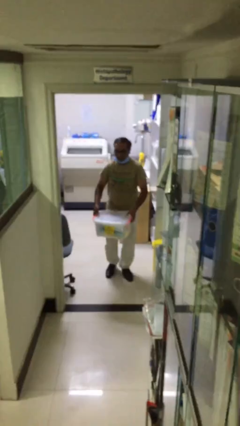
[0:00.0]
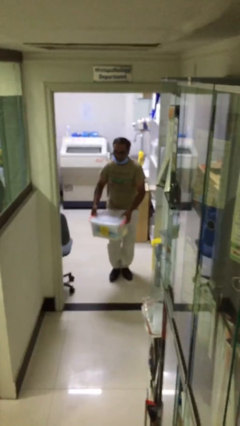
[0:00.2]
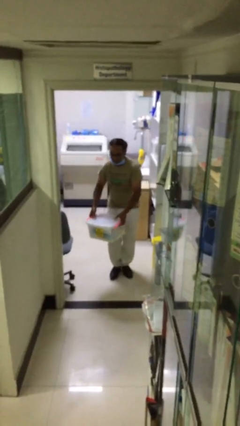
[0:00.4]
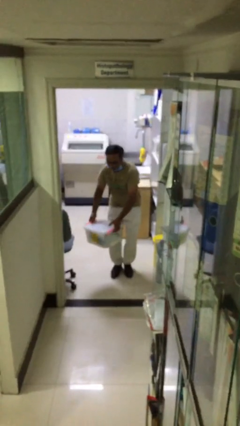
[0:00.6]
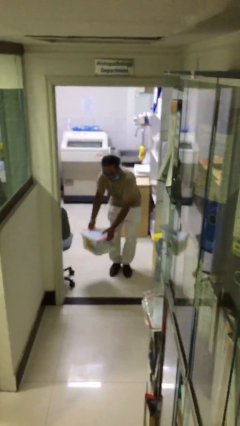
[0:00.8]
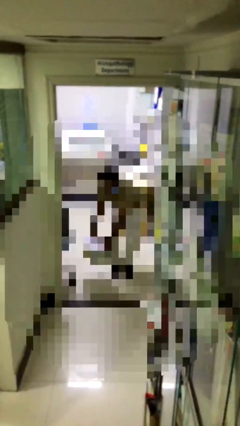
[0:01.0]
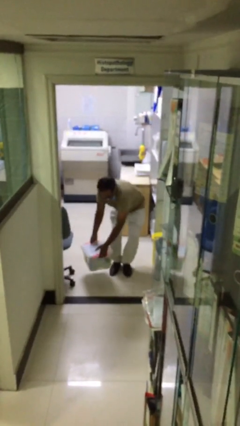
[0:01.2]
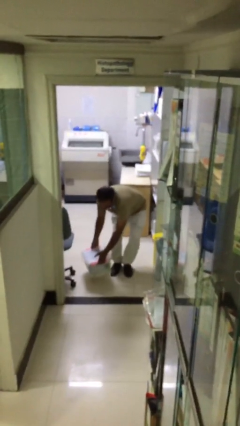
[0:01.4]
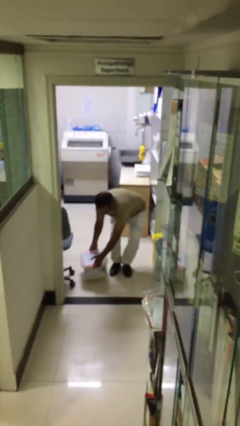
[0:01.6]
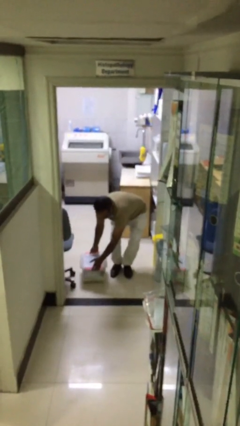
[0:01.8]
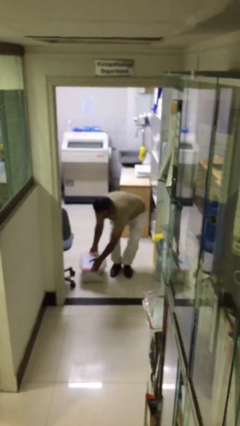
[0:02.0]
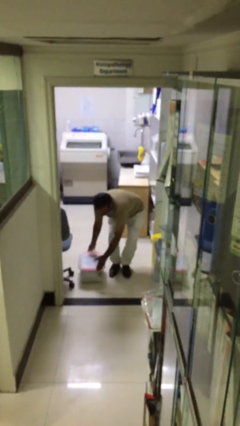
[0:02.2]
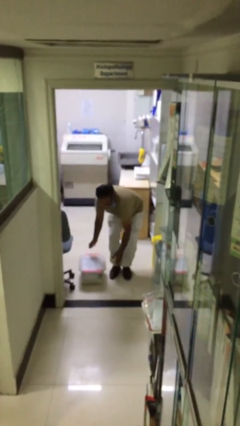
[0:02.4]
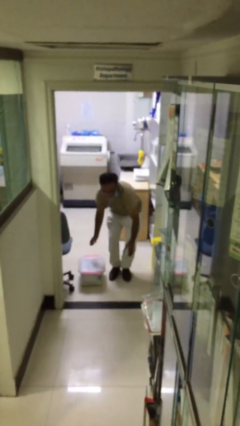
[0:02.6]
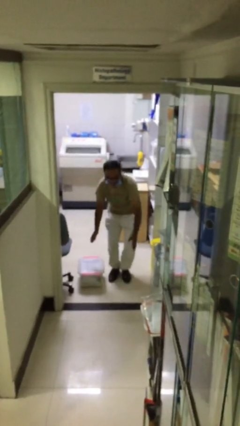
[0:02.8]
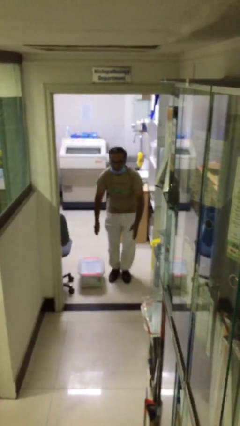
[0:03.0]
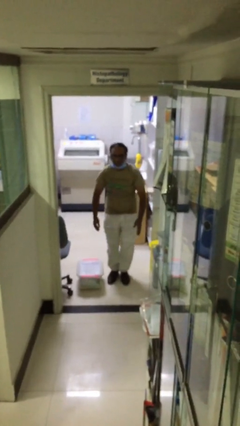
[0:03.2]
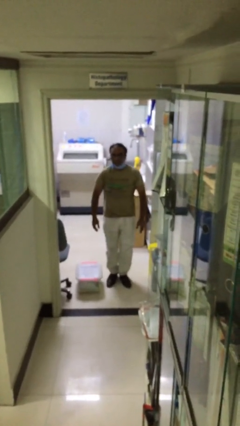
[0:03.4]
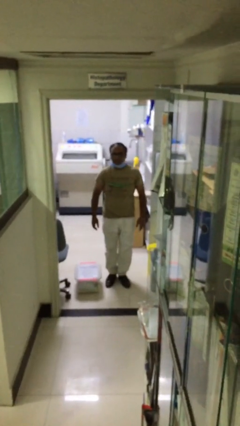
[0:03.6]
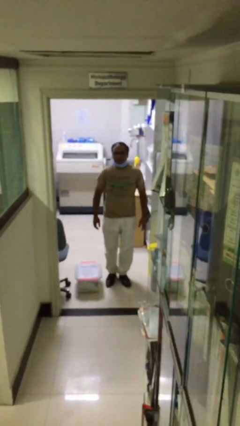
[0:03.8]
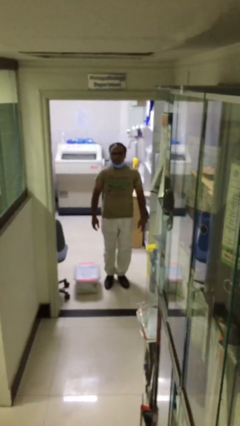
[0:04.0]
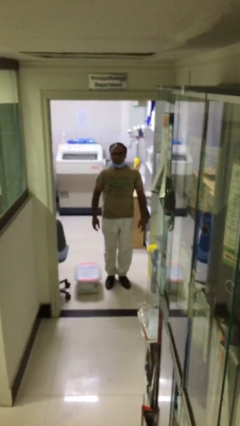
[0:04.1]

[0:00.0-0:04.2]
person puts down object on floor

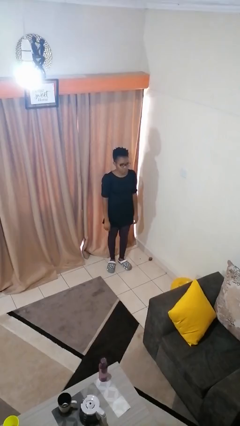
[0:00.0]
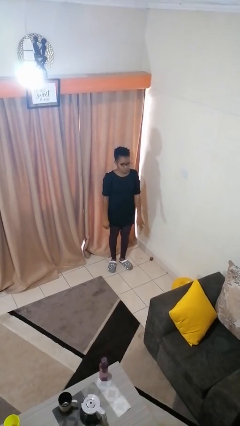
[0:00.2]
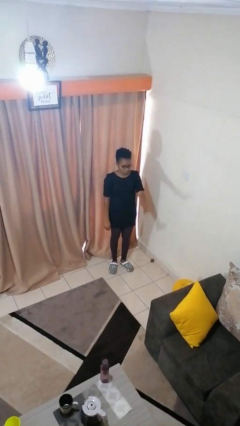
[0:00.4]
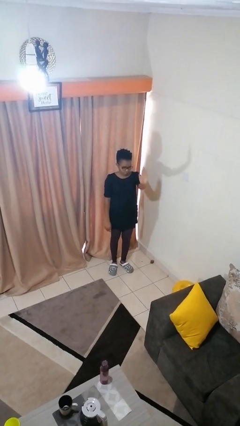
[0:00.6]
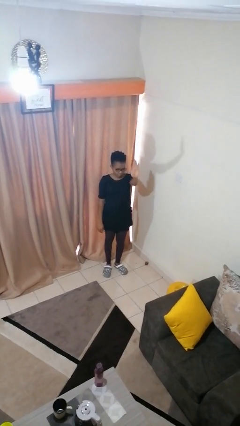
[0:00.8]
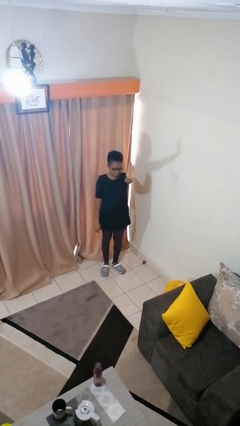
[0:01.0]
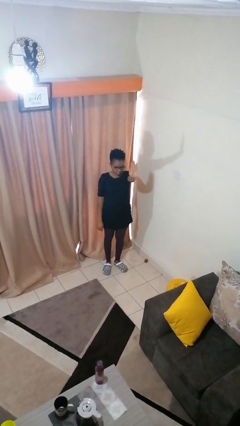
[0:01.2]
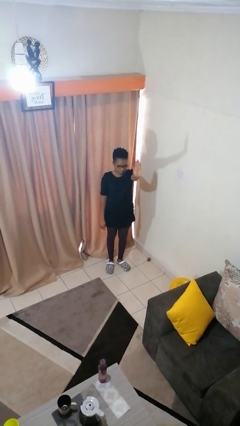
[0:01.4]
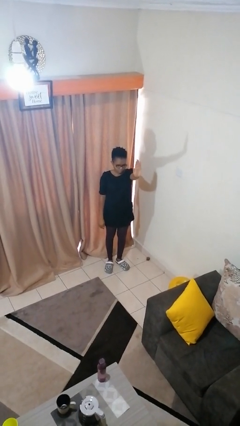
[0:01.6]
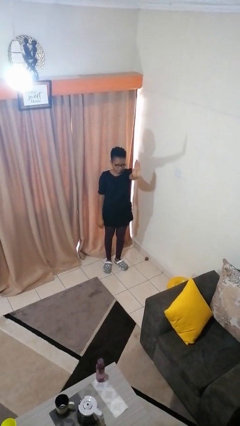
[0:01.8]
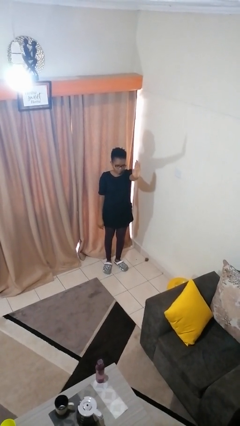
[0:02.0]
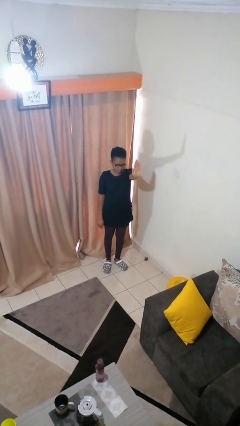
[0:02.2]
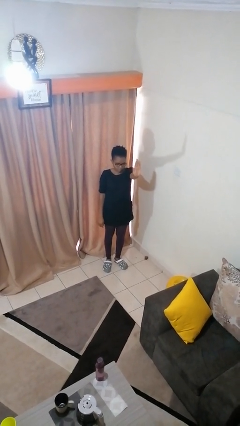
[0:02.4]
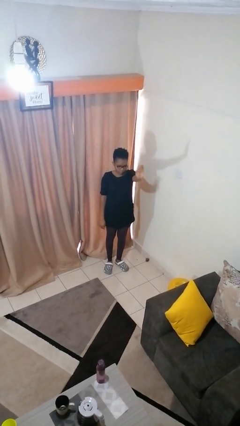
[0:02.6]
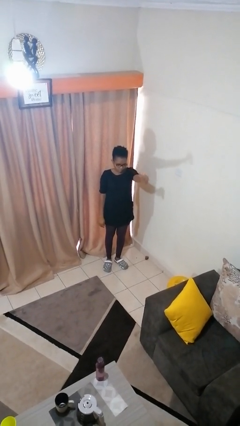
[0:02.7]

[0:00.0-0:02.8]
person gestures stop

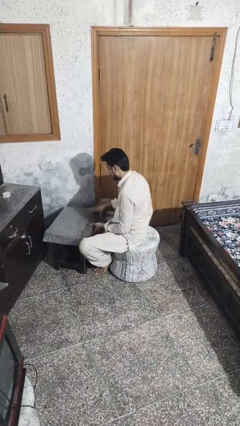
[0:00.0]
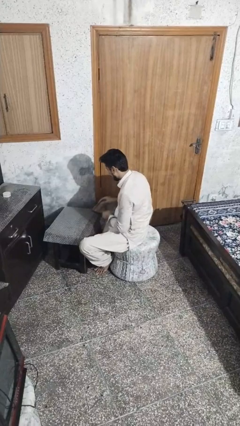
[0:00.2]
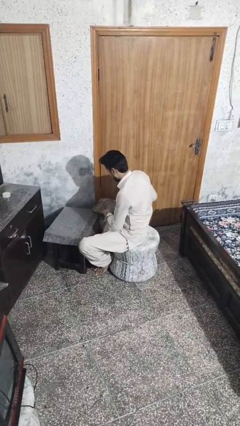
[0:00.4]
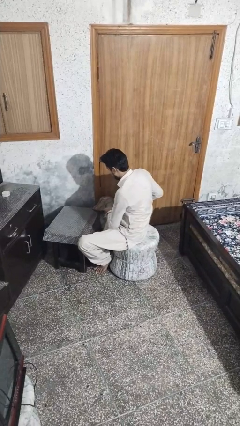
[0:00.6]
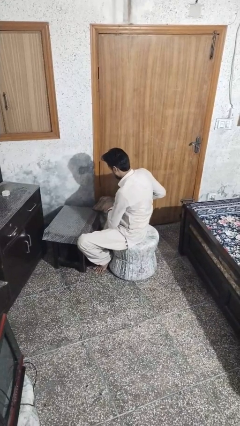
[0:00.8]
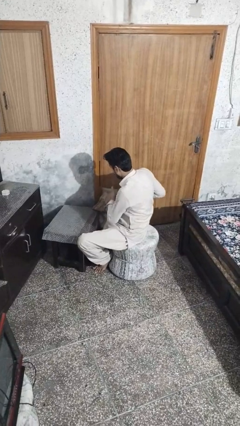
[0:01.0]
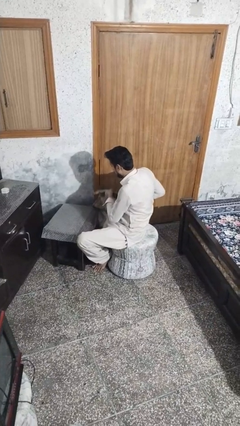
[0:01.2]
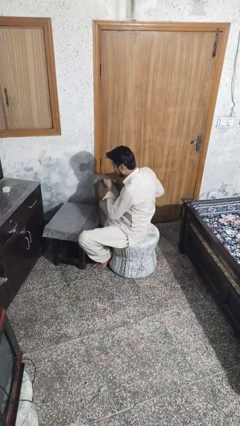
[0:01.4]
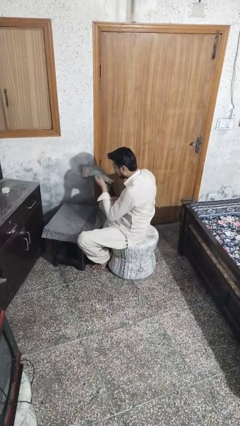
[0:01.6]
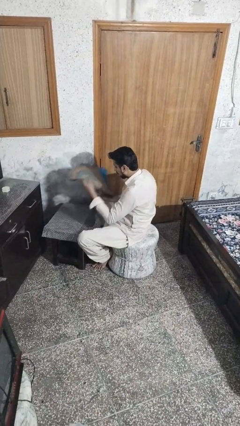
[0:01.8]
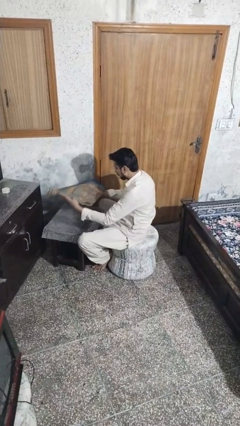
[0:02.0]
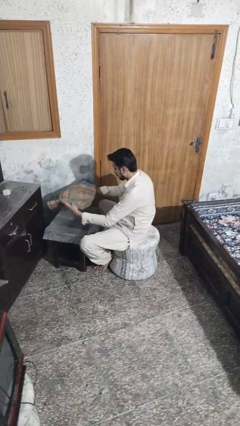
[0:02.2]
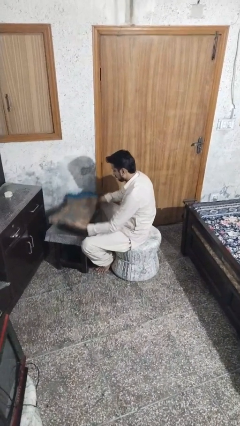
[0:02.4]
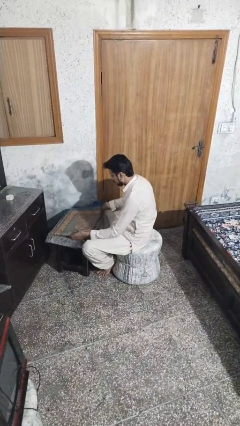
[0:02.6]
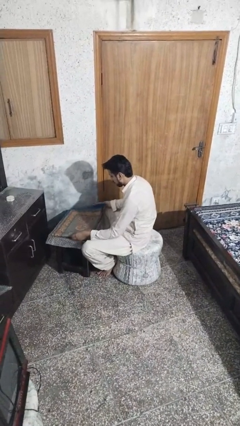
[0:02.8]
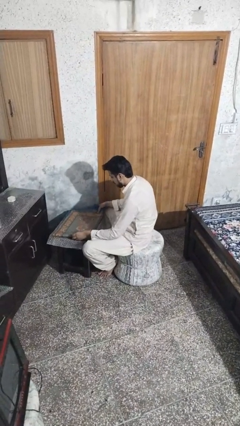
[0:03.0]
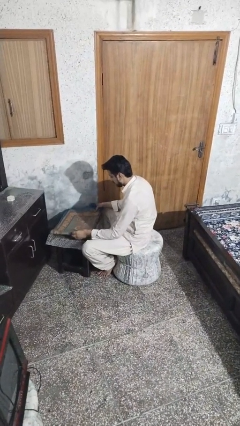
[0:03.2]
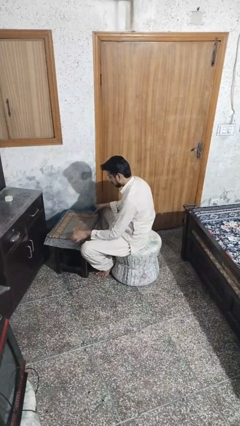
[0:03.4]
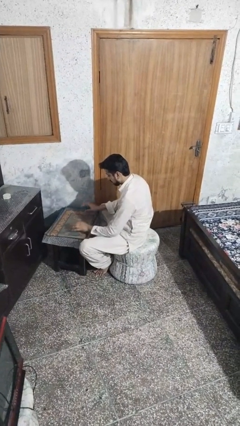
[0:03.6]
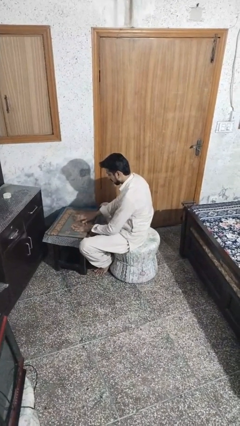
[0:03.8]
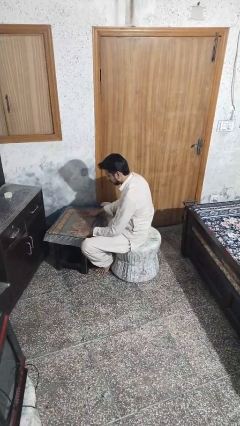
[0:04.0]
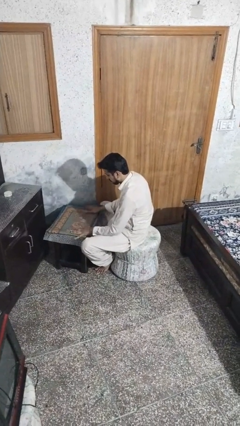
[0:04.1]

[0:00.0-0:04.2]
person spreads tablecloth

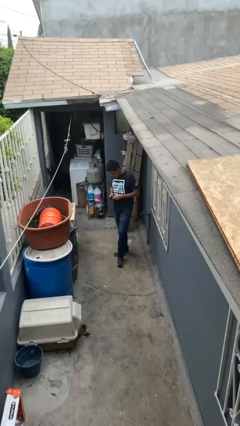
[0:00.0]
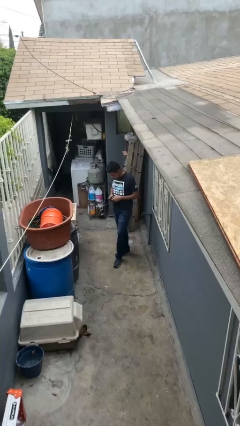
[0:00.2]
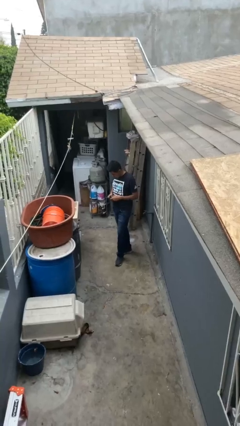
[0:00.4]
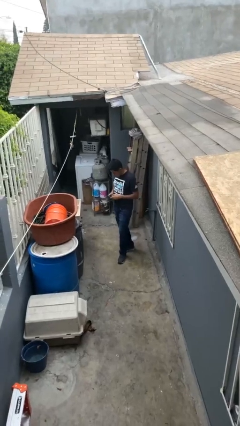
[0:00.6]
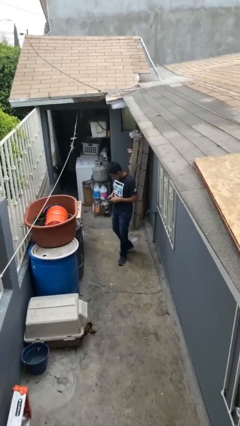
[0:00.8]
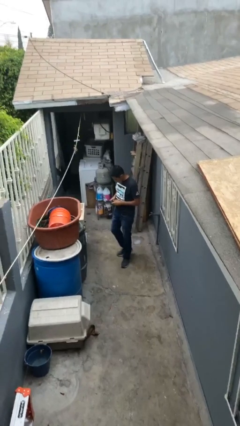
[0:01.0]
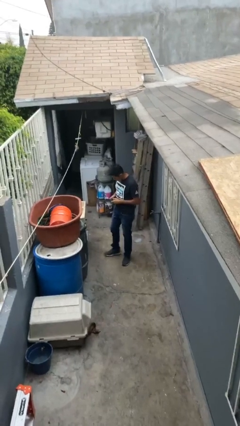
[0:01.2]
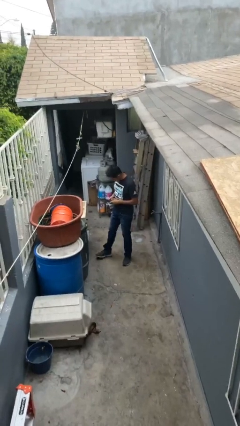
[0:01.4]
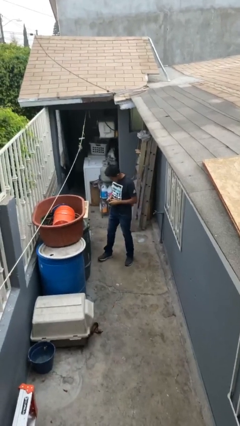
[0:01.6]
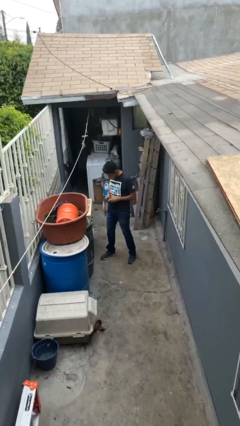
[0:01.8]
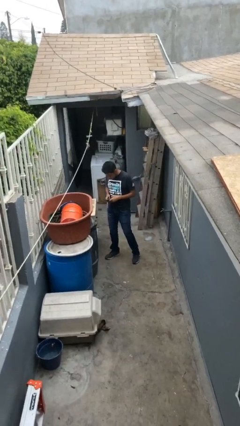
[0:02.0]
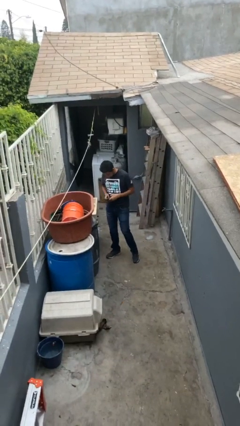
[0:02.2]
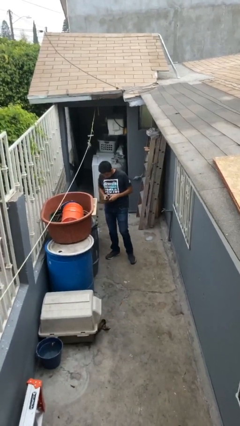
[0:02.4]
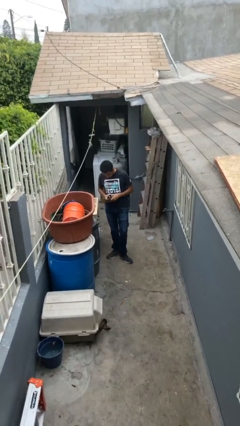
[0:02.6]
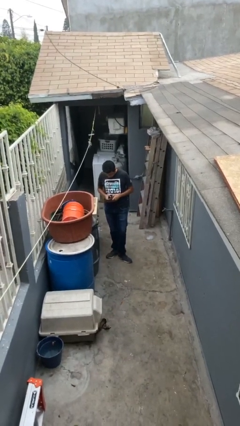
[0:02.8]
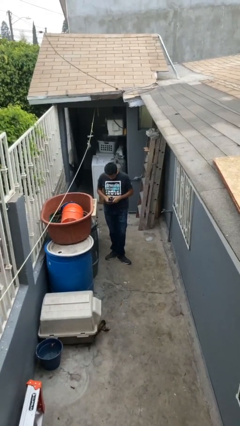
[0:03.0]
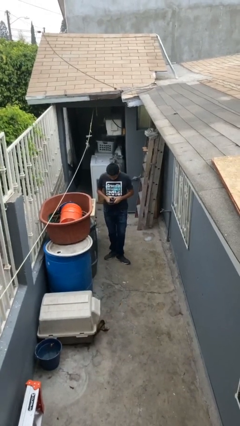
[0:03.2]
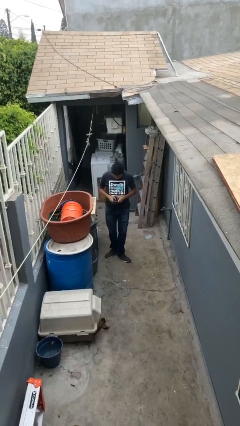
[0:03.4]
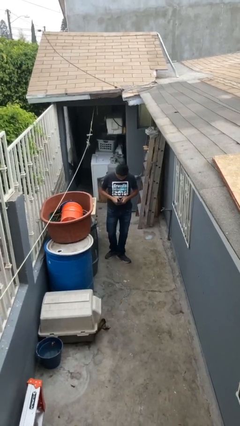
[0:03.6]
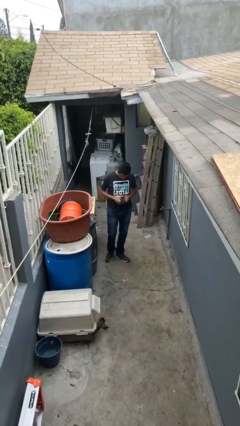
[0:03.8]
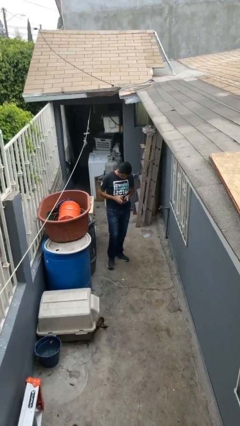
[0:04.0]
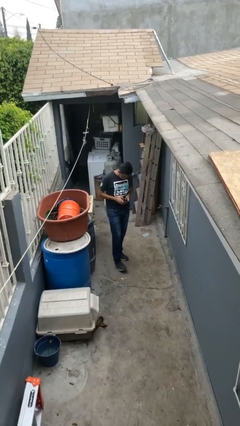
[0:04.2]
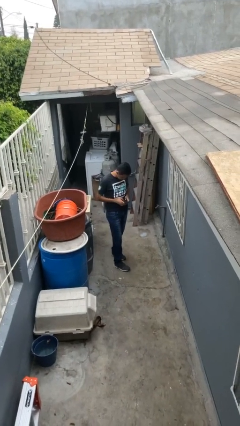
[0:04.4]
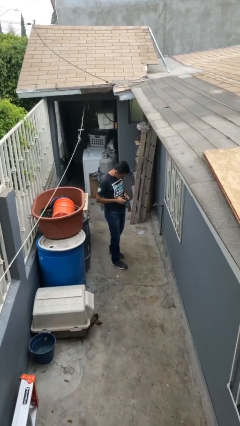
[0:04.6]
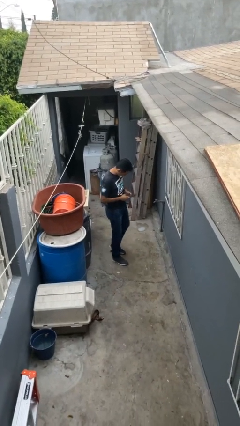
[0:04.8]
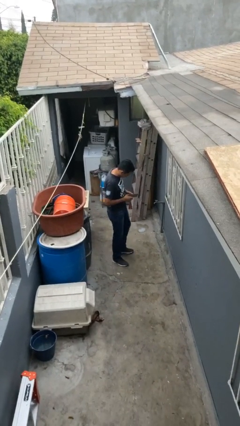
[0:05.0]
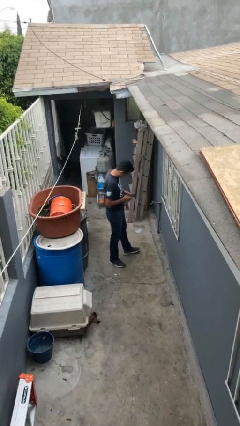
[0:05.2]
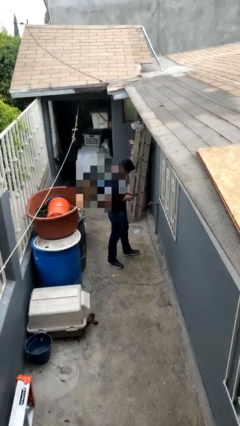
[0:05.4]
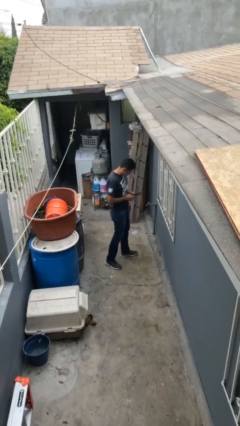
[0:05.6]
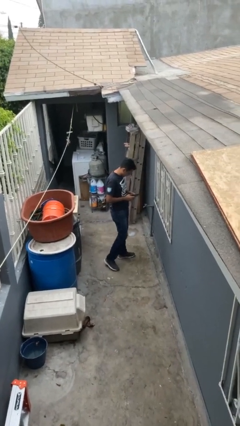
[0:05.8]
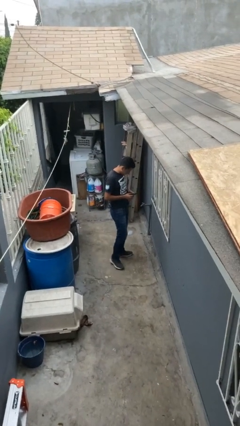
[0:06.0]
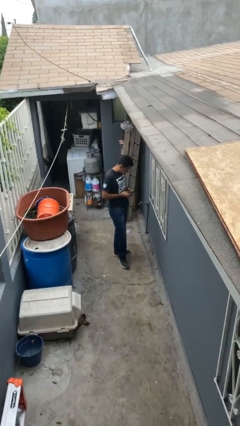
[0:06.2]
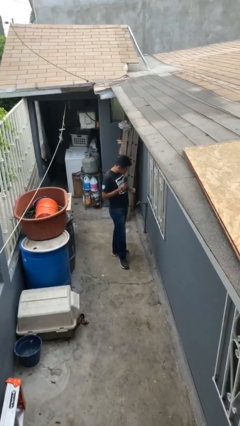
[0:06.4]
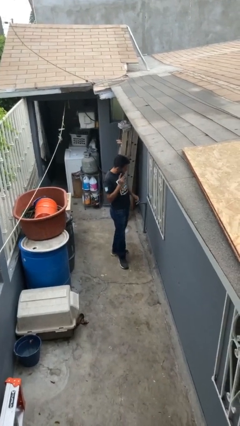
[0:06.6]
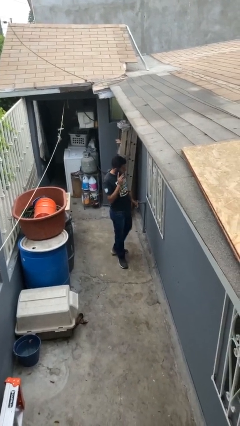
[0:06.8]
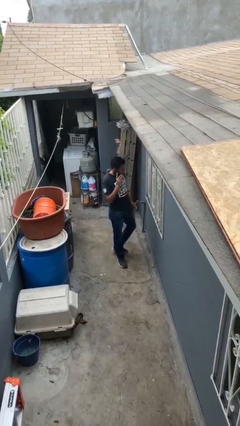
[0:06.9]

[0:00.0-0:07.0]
person texts on phone
